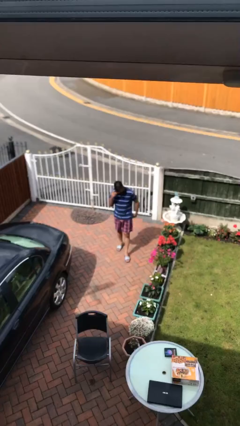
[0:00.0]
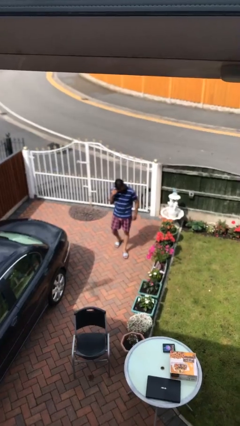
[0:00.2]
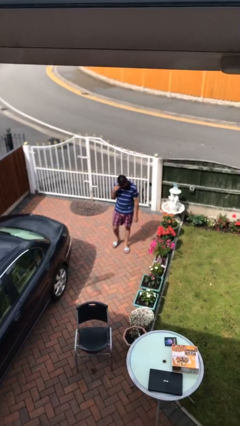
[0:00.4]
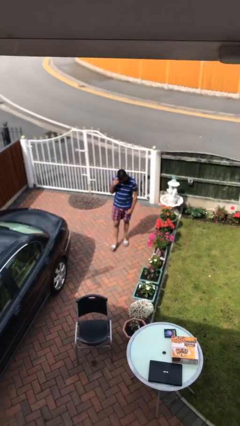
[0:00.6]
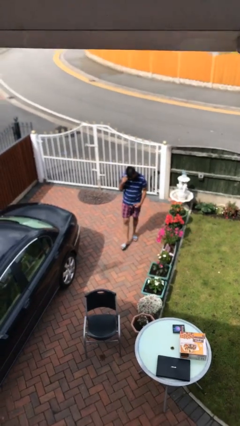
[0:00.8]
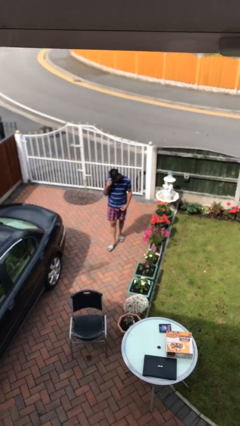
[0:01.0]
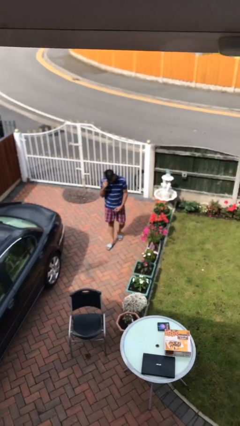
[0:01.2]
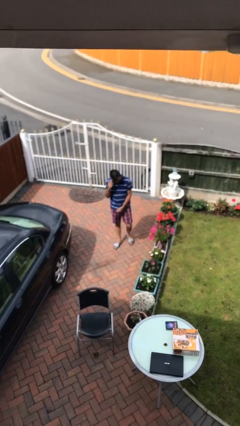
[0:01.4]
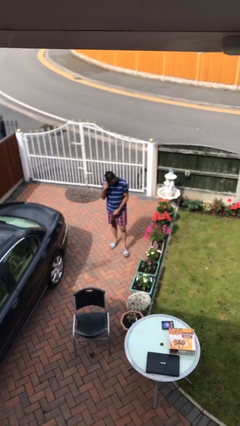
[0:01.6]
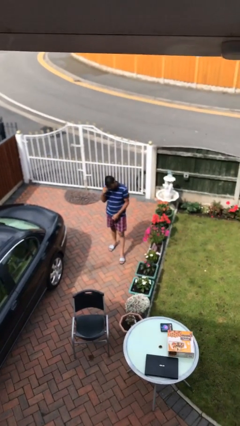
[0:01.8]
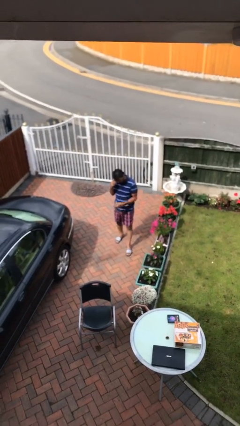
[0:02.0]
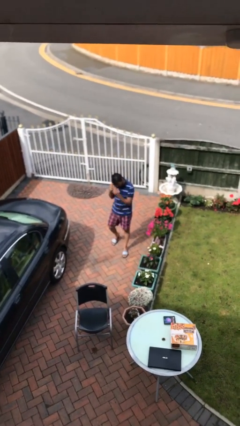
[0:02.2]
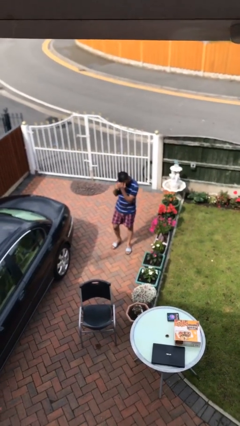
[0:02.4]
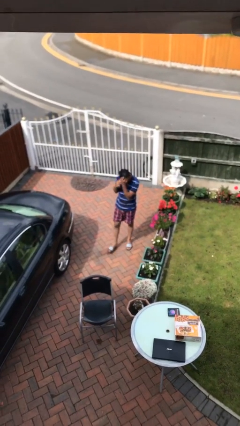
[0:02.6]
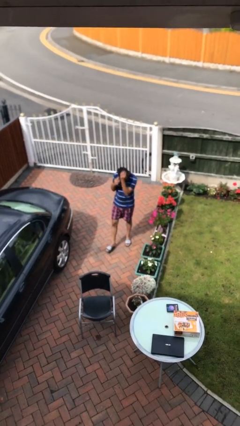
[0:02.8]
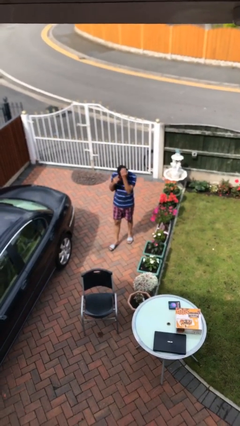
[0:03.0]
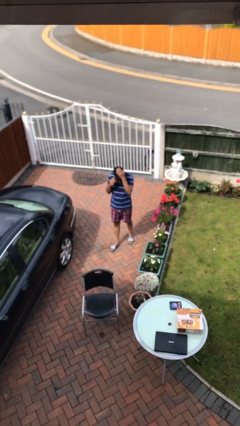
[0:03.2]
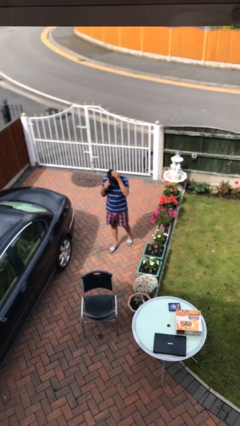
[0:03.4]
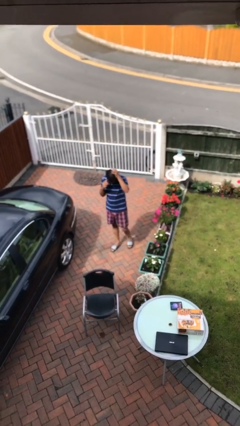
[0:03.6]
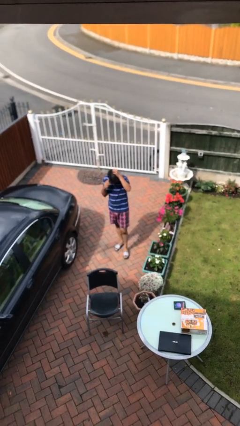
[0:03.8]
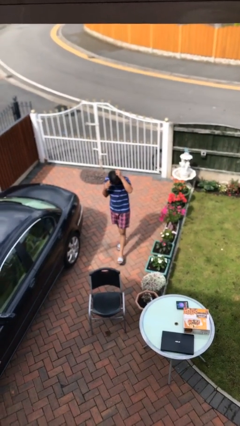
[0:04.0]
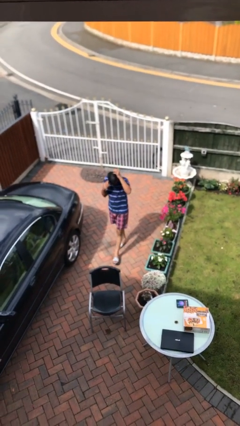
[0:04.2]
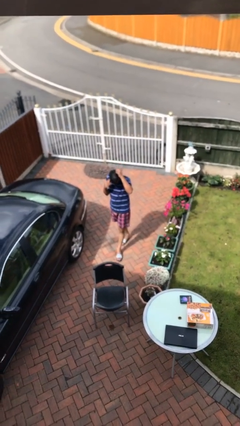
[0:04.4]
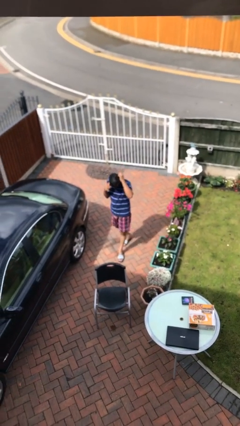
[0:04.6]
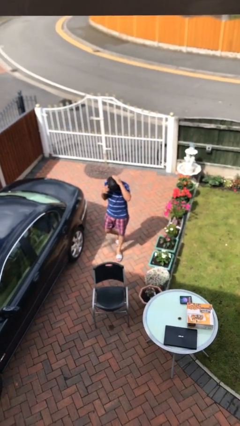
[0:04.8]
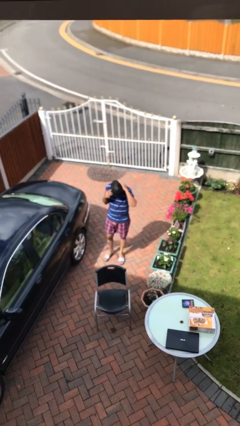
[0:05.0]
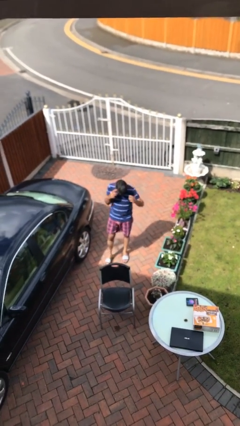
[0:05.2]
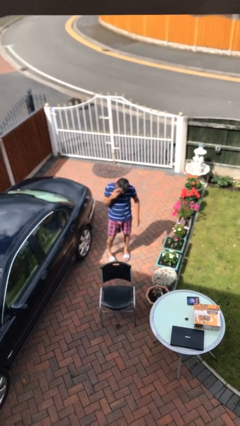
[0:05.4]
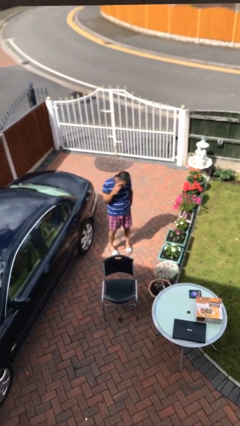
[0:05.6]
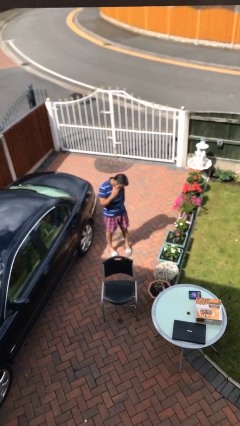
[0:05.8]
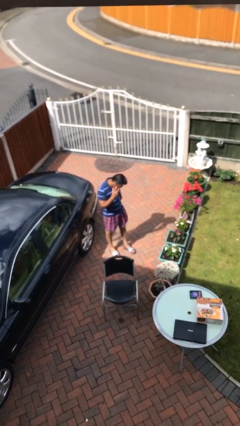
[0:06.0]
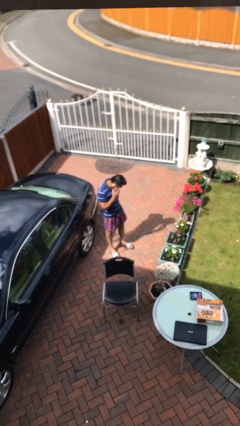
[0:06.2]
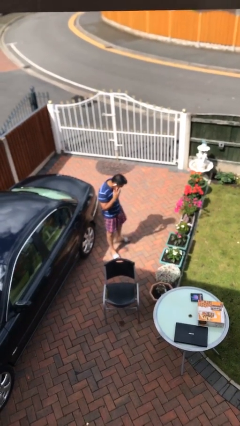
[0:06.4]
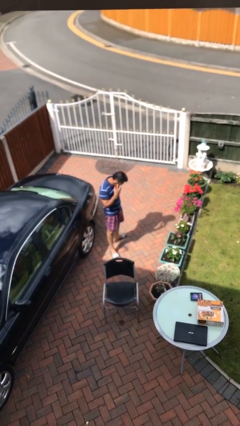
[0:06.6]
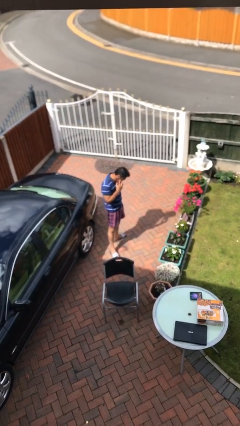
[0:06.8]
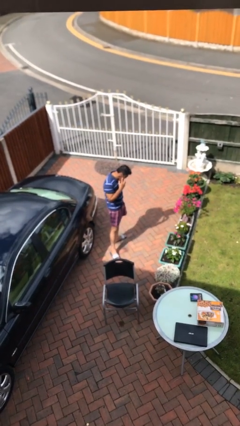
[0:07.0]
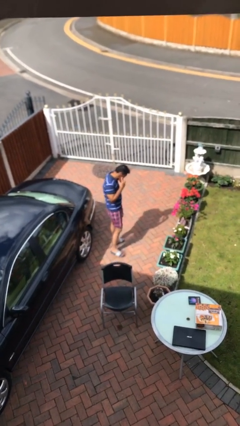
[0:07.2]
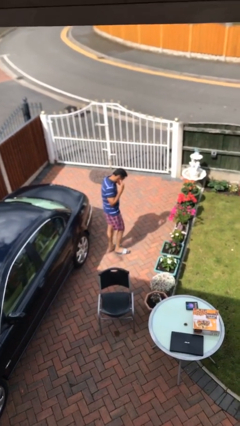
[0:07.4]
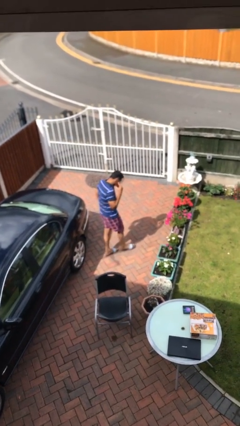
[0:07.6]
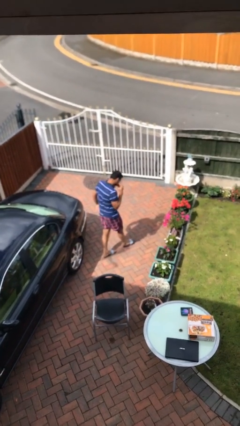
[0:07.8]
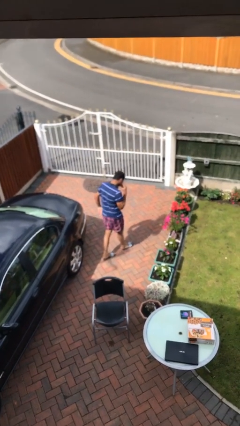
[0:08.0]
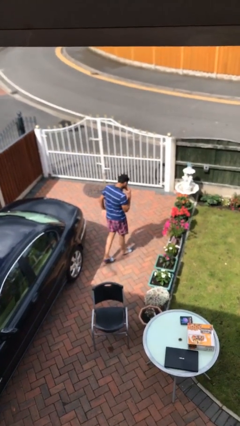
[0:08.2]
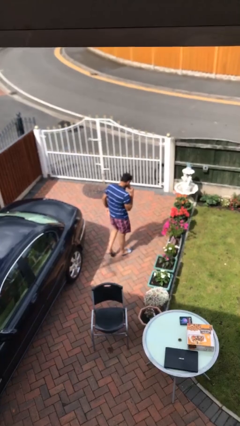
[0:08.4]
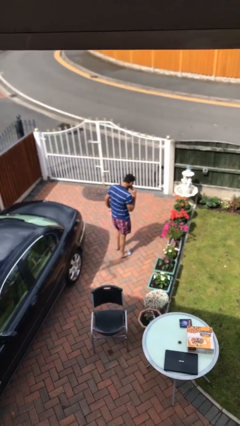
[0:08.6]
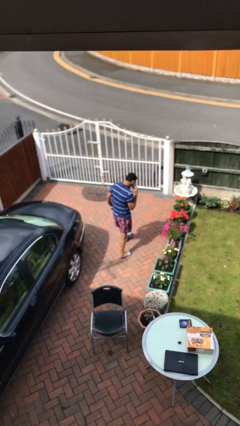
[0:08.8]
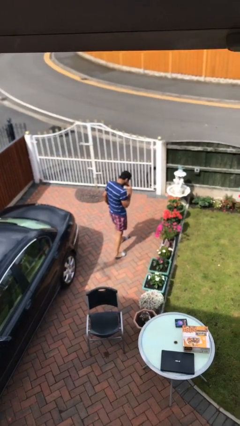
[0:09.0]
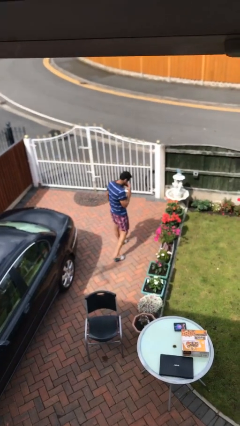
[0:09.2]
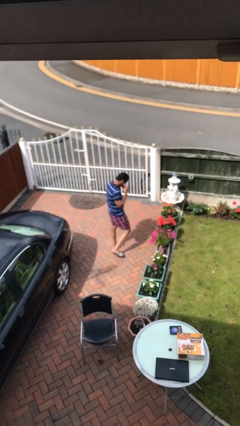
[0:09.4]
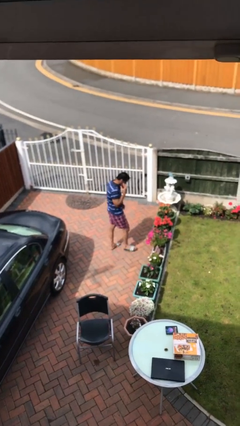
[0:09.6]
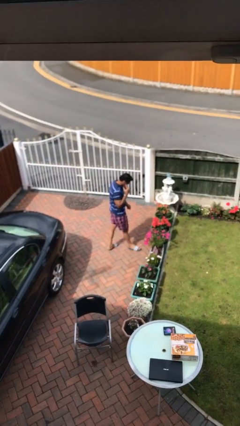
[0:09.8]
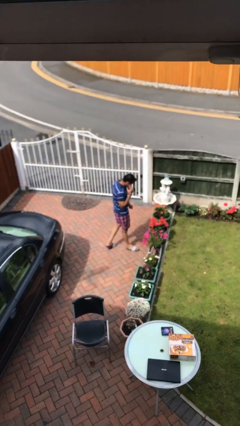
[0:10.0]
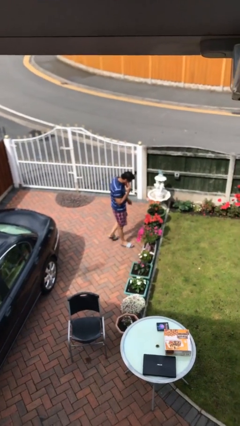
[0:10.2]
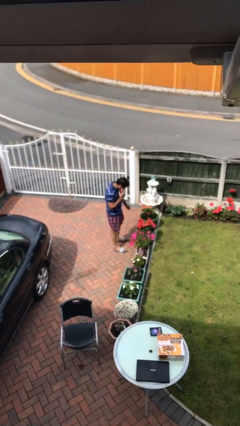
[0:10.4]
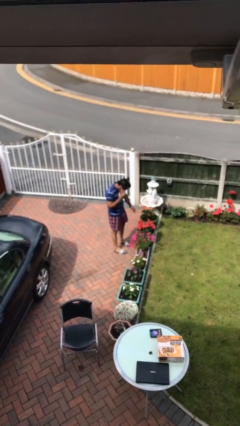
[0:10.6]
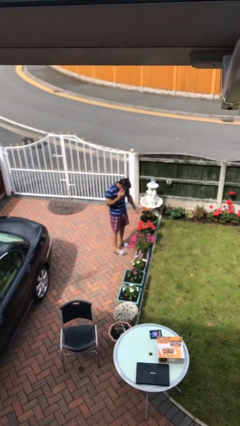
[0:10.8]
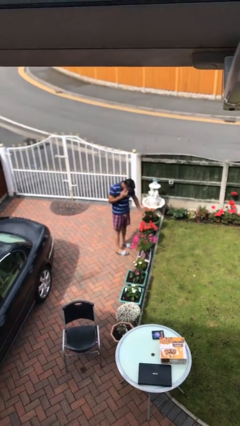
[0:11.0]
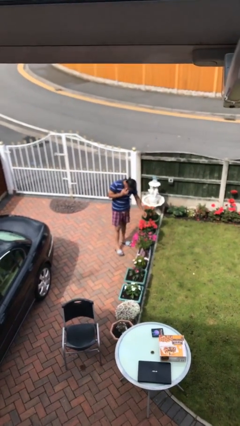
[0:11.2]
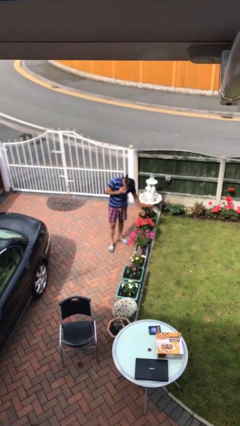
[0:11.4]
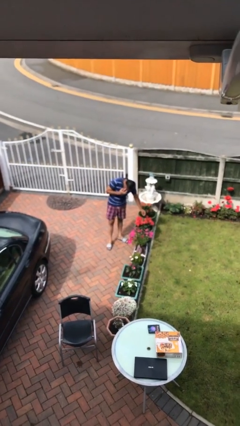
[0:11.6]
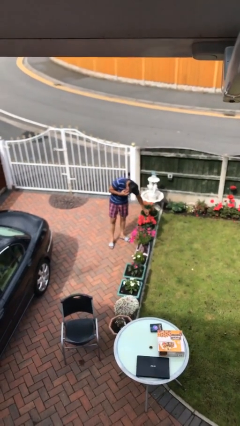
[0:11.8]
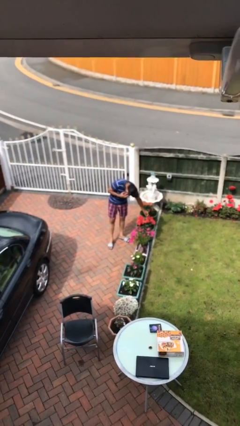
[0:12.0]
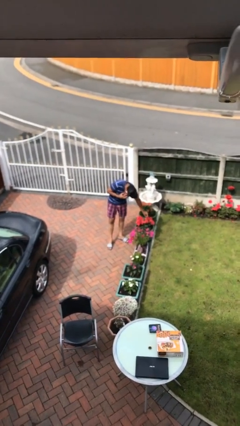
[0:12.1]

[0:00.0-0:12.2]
person talks on phone

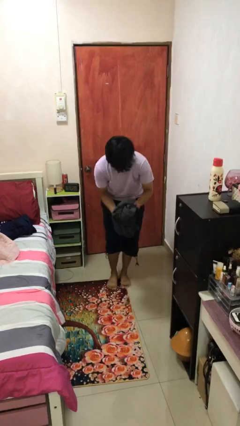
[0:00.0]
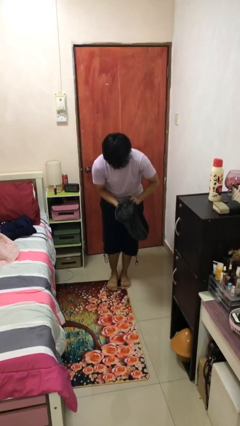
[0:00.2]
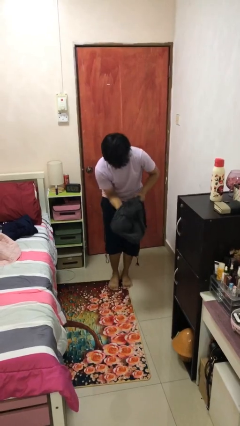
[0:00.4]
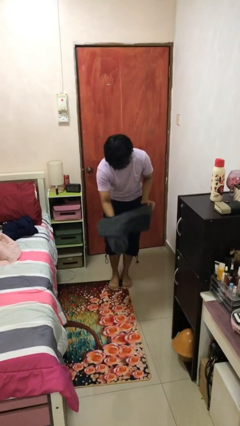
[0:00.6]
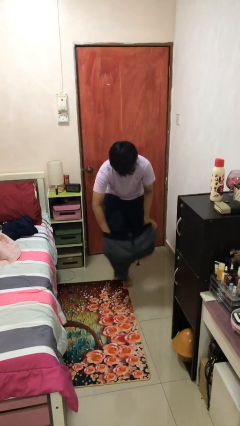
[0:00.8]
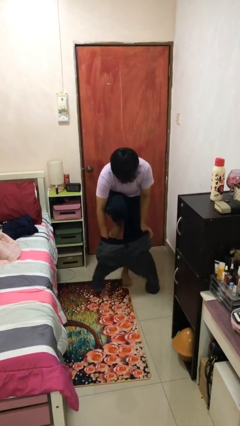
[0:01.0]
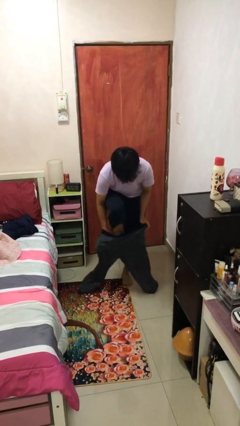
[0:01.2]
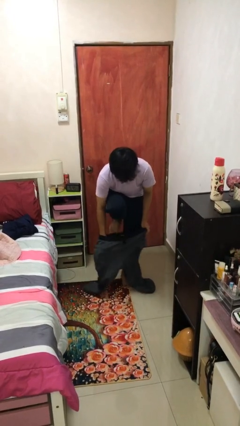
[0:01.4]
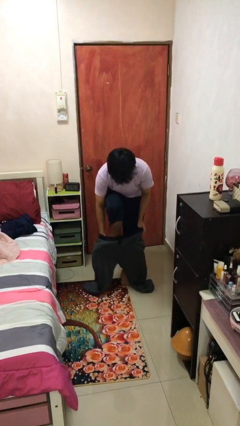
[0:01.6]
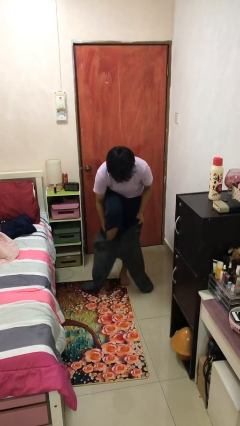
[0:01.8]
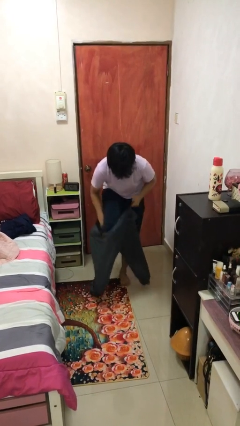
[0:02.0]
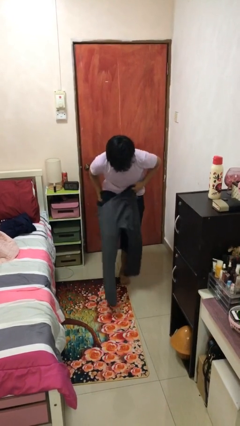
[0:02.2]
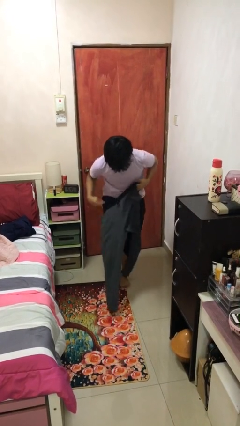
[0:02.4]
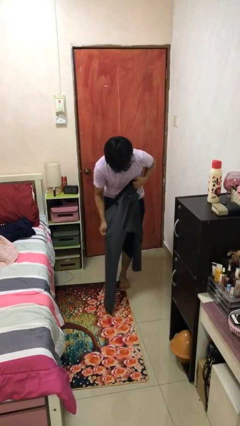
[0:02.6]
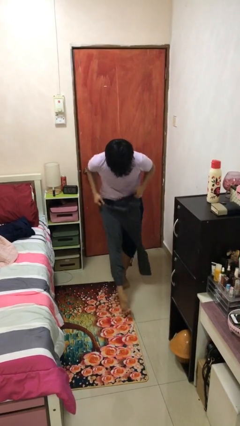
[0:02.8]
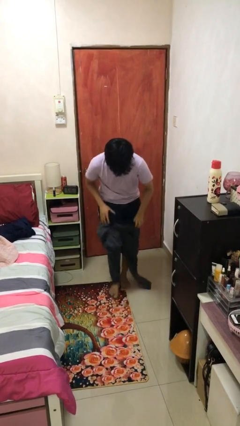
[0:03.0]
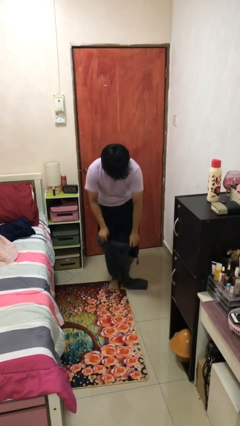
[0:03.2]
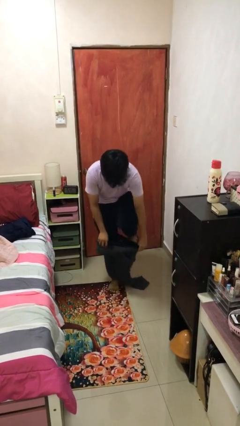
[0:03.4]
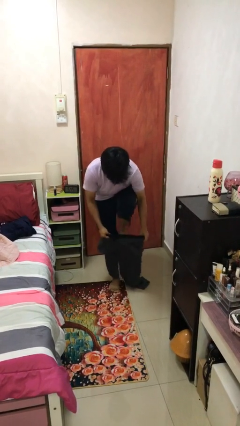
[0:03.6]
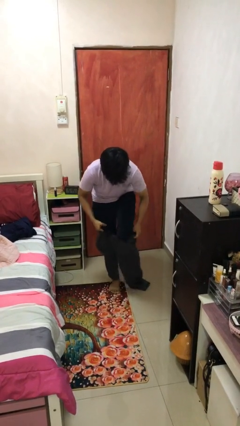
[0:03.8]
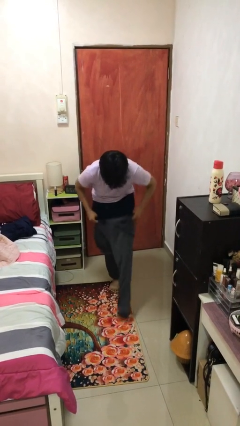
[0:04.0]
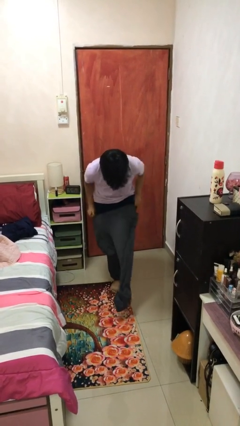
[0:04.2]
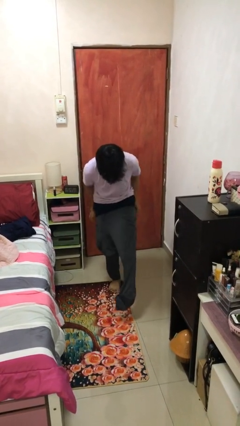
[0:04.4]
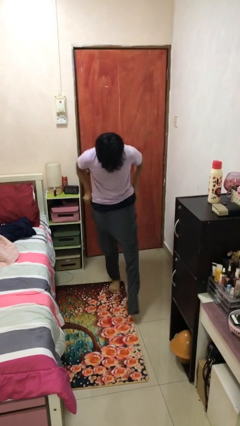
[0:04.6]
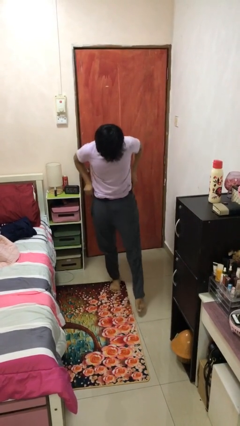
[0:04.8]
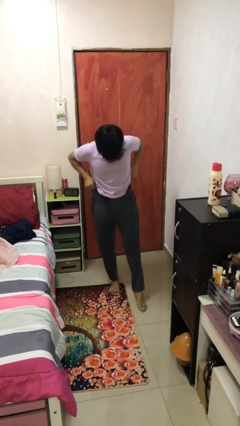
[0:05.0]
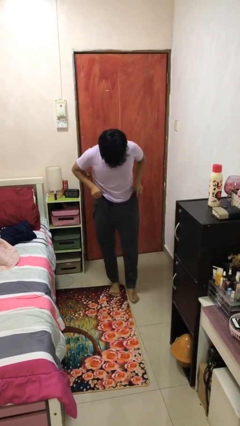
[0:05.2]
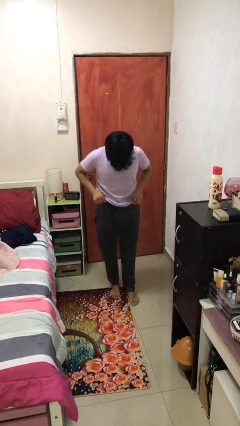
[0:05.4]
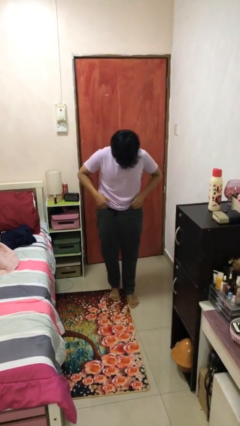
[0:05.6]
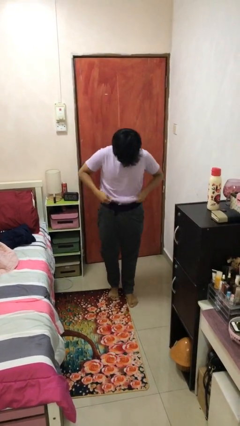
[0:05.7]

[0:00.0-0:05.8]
person puts on pants
